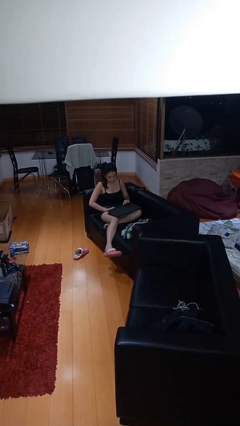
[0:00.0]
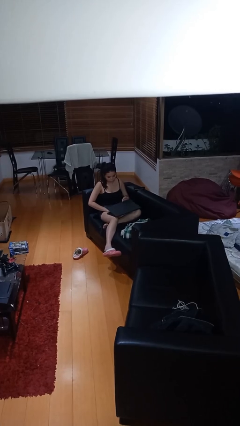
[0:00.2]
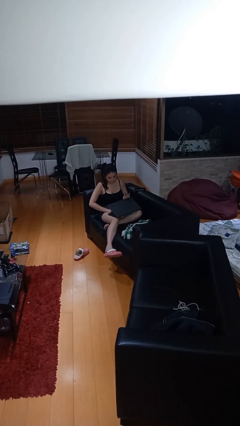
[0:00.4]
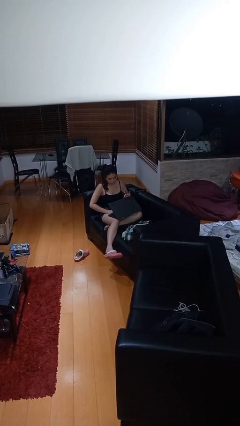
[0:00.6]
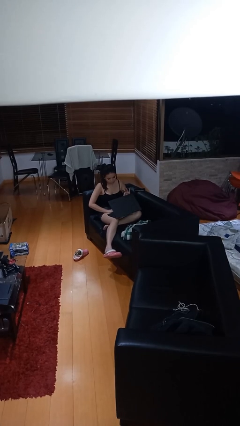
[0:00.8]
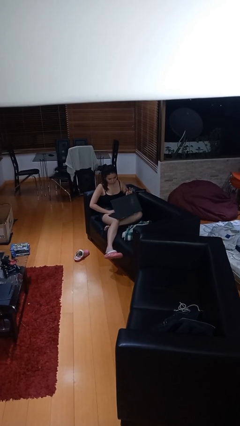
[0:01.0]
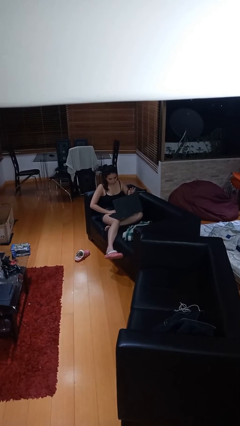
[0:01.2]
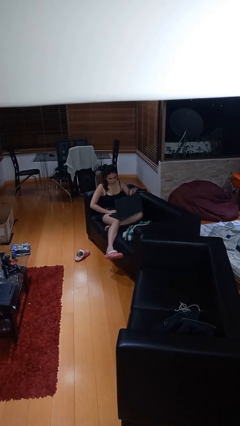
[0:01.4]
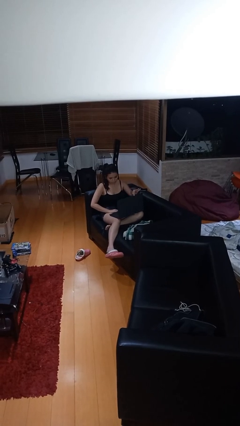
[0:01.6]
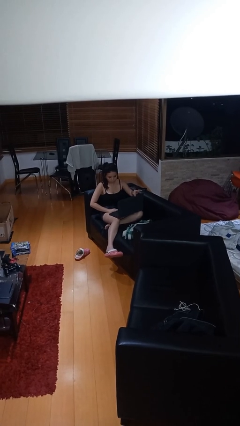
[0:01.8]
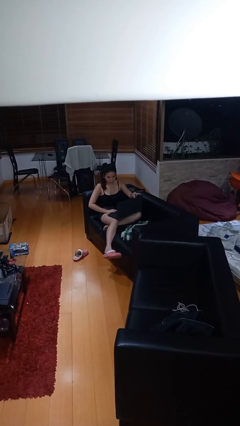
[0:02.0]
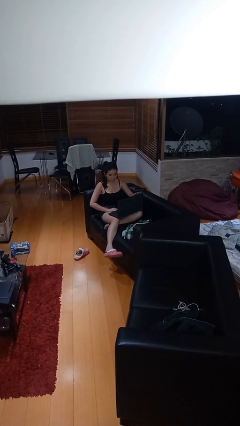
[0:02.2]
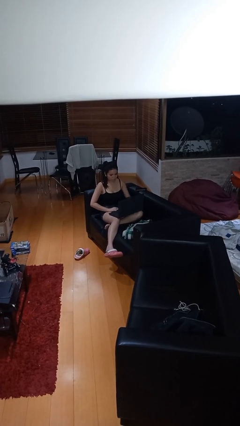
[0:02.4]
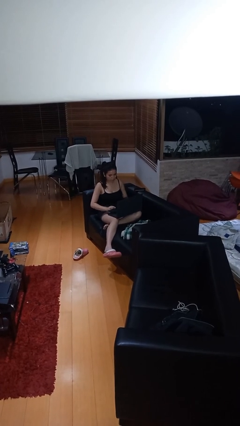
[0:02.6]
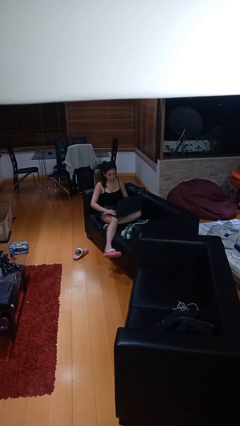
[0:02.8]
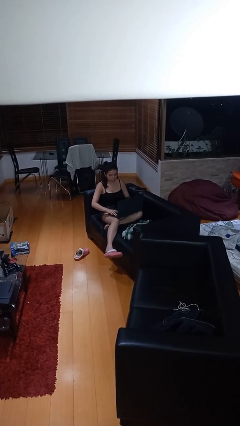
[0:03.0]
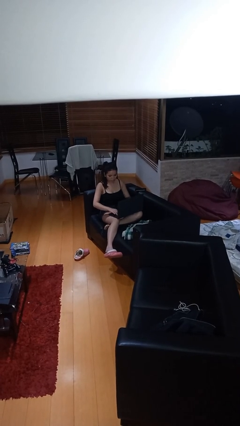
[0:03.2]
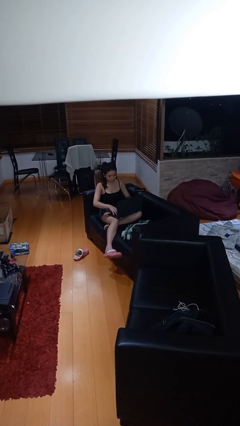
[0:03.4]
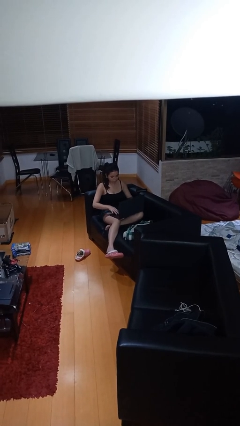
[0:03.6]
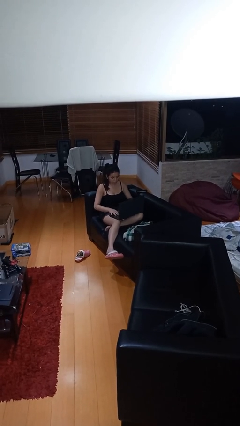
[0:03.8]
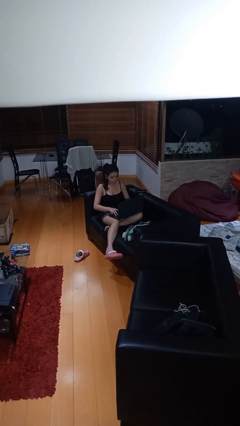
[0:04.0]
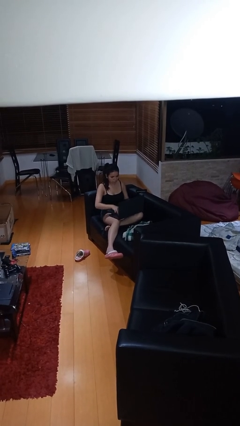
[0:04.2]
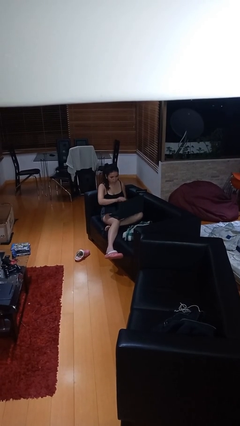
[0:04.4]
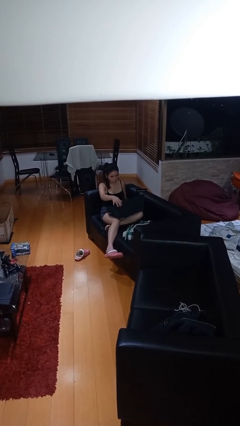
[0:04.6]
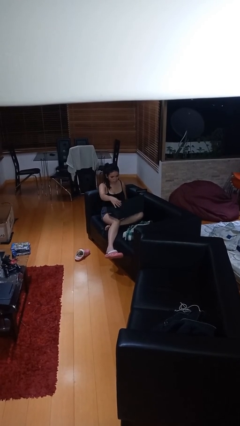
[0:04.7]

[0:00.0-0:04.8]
person interacts with laptop

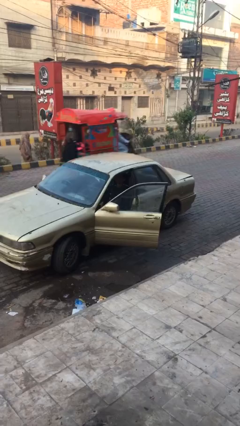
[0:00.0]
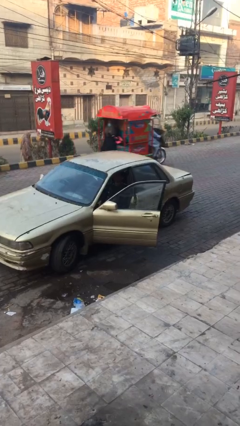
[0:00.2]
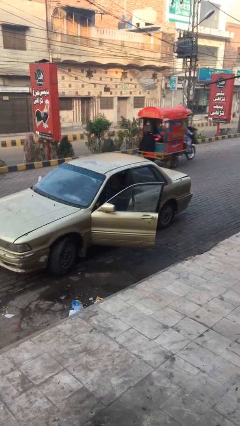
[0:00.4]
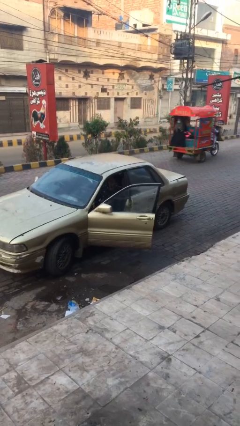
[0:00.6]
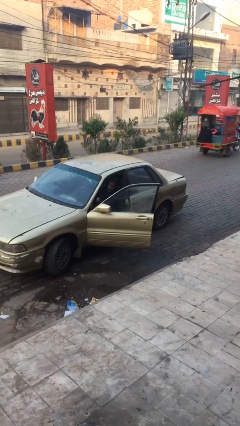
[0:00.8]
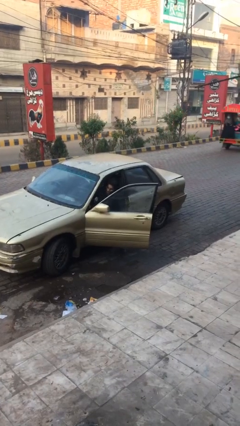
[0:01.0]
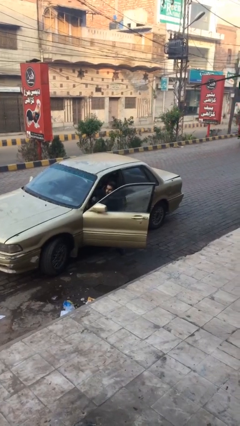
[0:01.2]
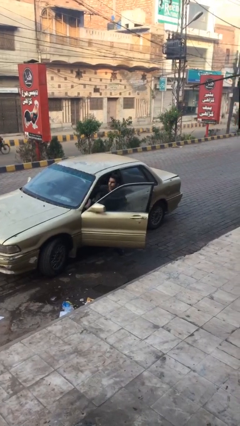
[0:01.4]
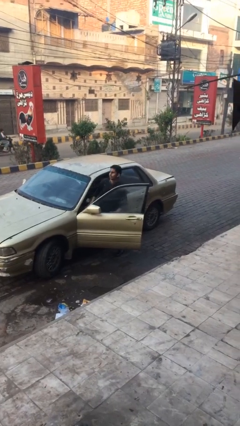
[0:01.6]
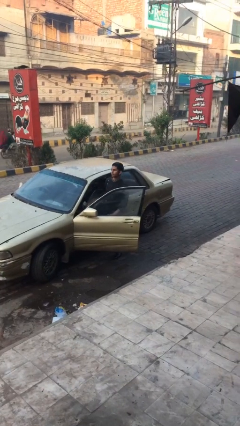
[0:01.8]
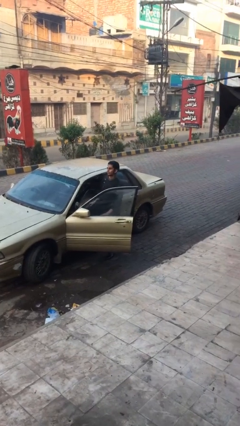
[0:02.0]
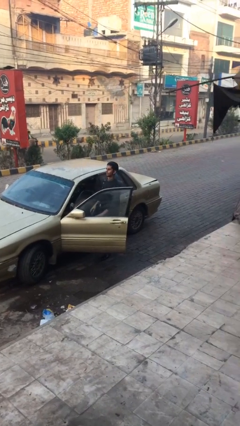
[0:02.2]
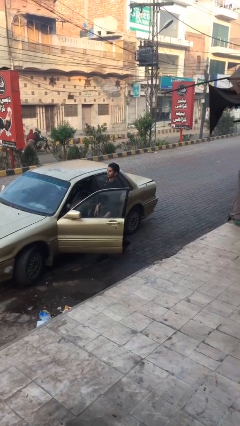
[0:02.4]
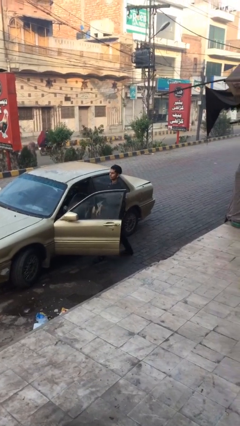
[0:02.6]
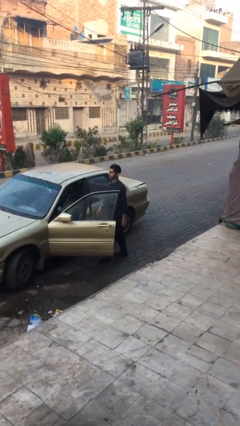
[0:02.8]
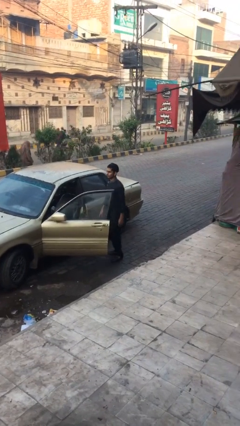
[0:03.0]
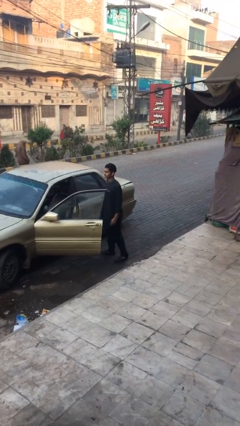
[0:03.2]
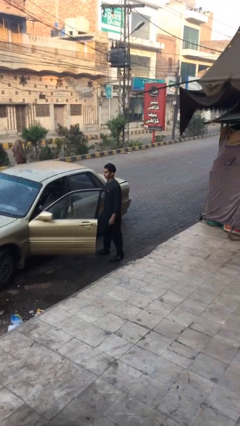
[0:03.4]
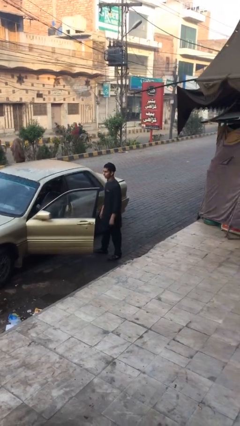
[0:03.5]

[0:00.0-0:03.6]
person exits car

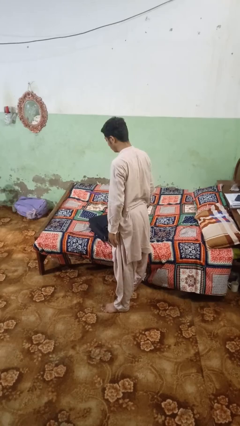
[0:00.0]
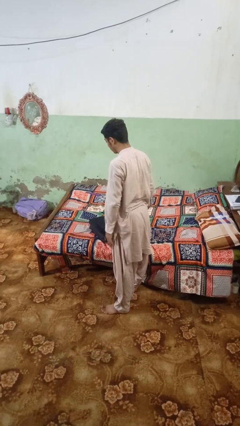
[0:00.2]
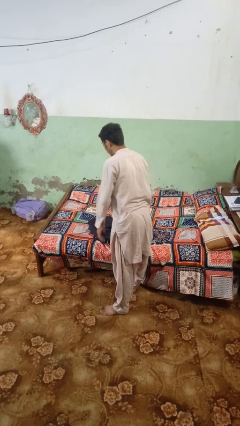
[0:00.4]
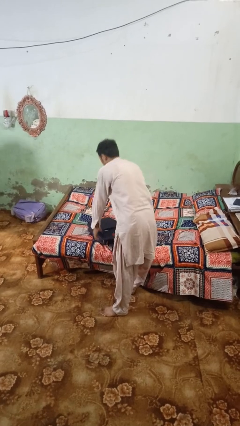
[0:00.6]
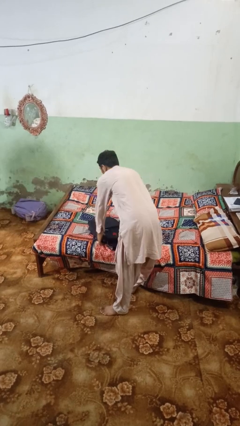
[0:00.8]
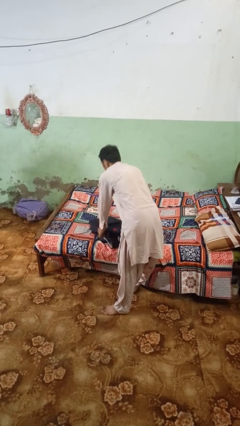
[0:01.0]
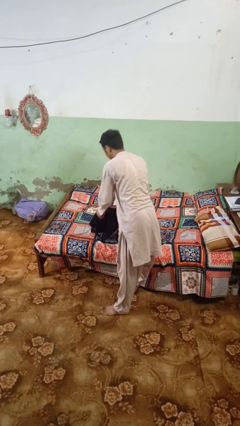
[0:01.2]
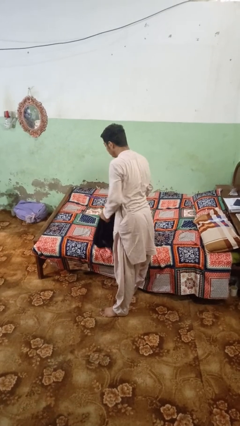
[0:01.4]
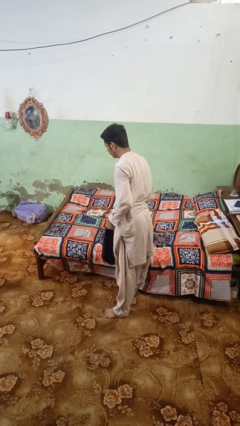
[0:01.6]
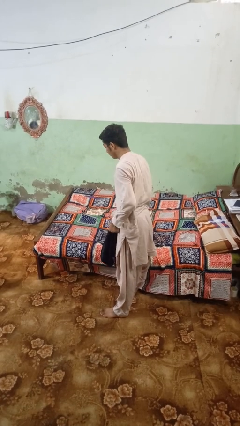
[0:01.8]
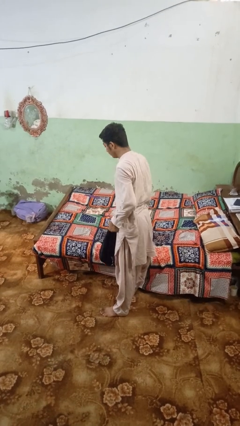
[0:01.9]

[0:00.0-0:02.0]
person picks up object from bed

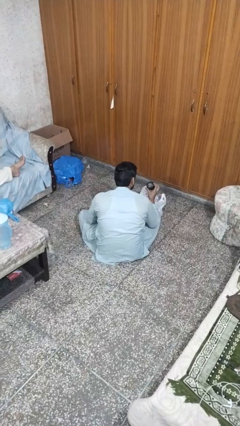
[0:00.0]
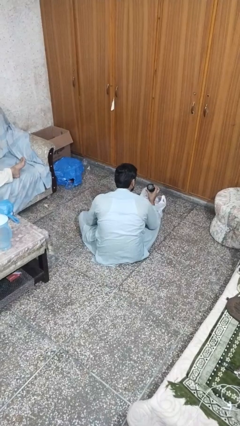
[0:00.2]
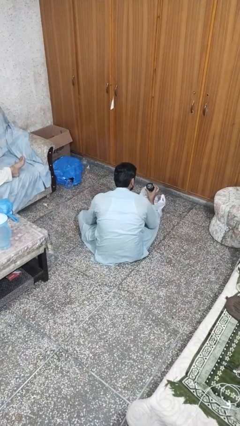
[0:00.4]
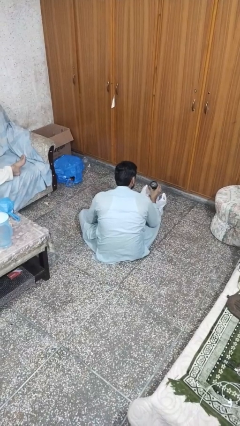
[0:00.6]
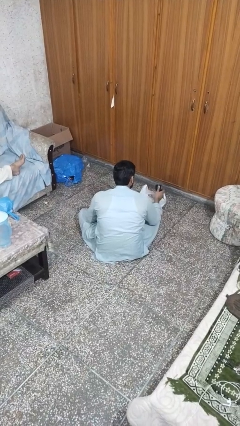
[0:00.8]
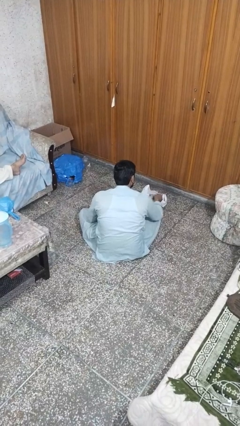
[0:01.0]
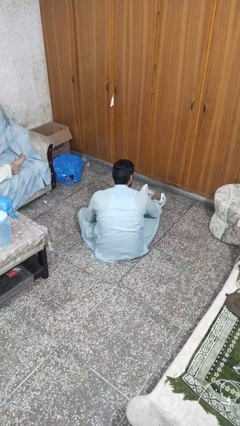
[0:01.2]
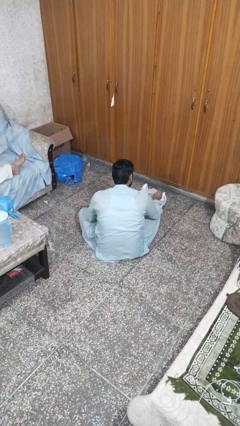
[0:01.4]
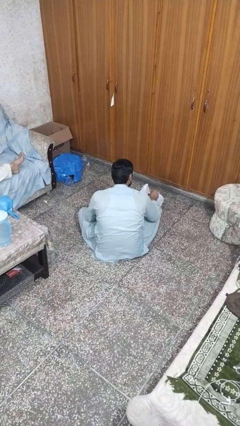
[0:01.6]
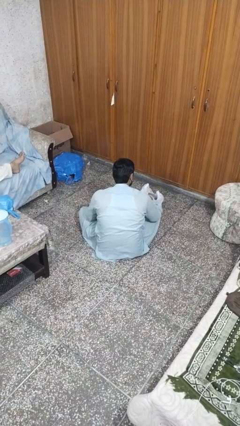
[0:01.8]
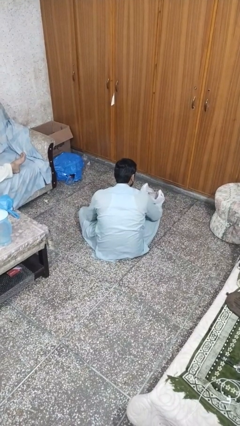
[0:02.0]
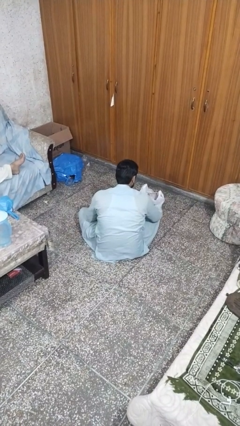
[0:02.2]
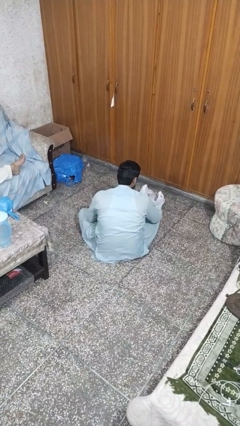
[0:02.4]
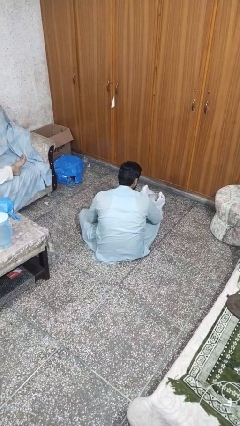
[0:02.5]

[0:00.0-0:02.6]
person puts object into bag

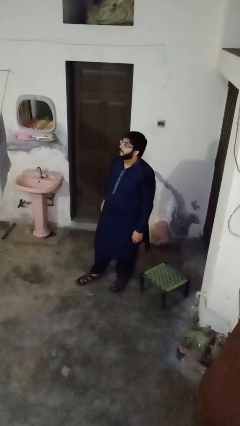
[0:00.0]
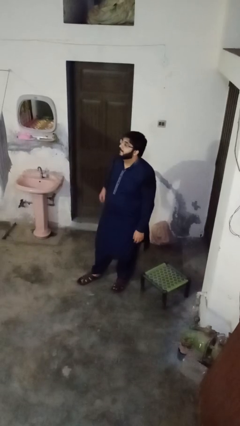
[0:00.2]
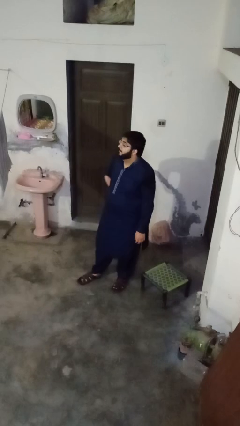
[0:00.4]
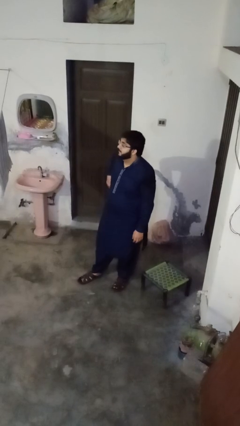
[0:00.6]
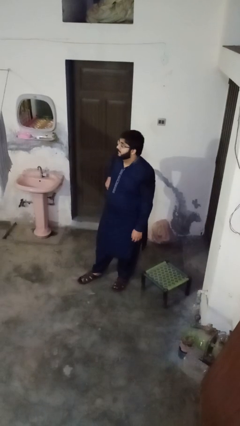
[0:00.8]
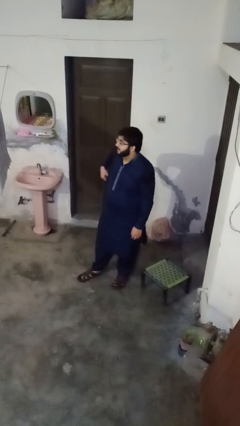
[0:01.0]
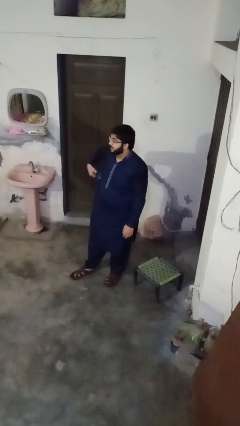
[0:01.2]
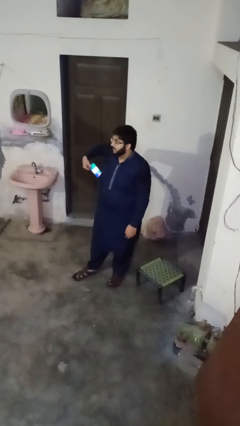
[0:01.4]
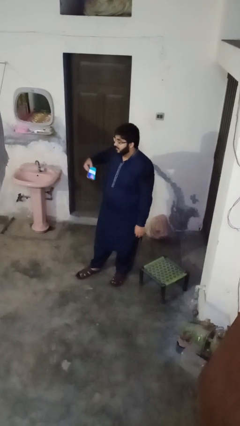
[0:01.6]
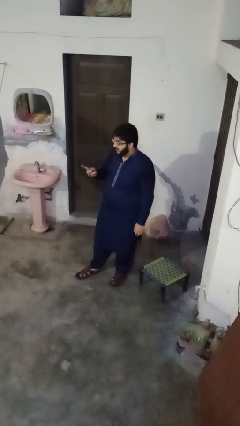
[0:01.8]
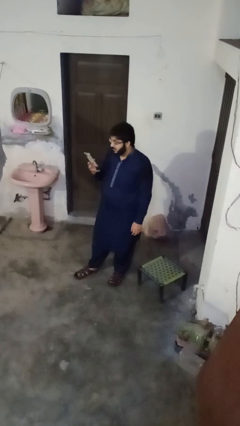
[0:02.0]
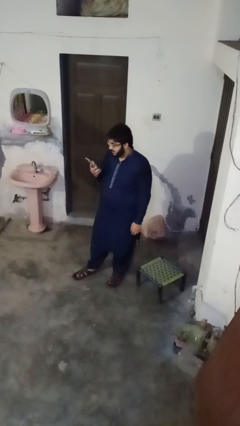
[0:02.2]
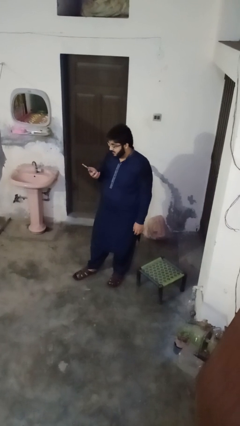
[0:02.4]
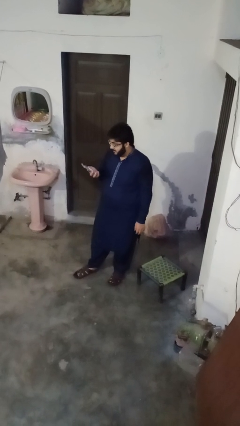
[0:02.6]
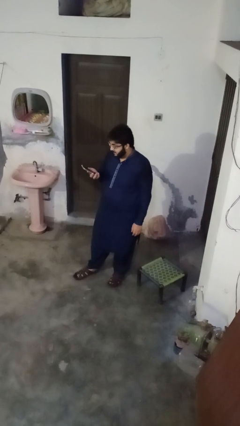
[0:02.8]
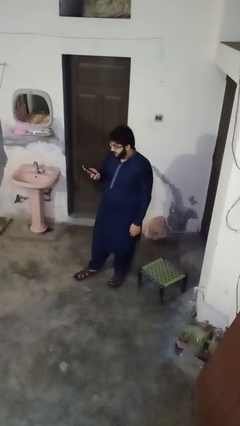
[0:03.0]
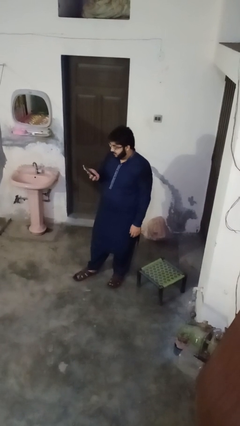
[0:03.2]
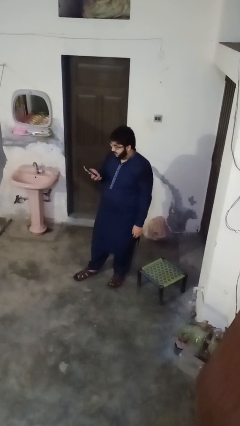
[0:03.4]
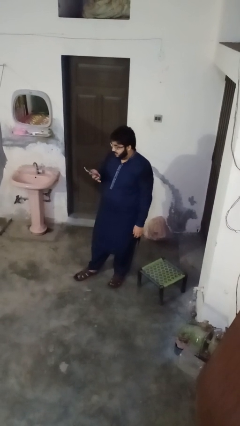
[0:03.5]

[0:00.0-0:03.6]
person takes phone from pocket

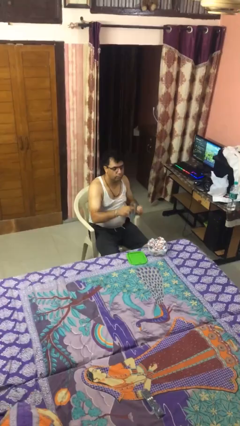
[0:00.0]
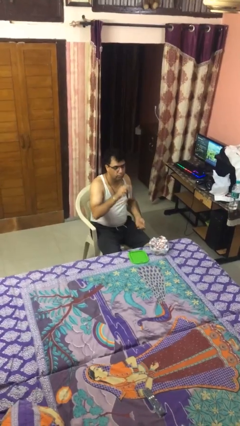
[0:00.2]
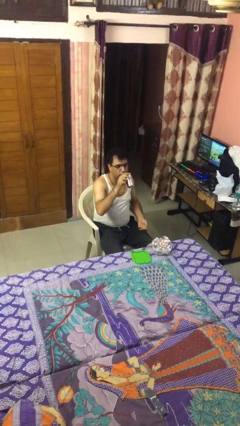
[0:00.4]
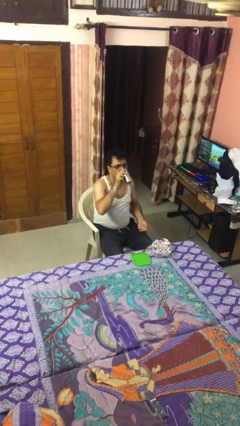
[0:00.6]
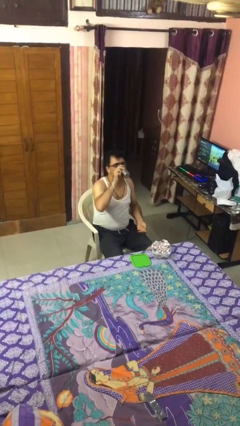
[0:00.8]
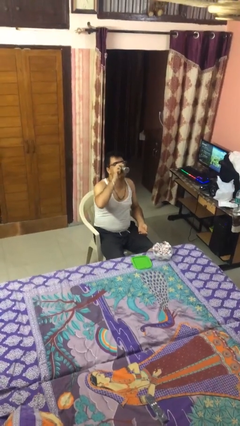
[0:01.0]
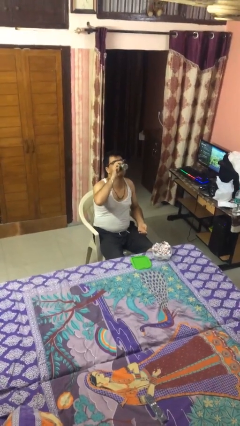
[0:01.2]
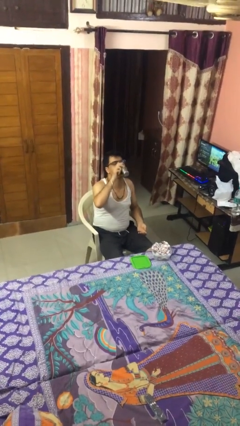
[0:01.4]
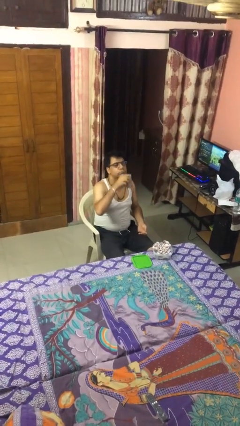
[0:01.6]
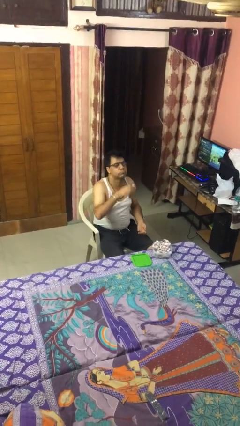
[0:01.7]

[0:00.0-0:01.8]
person drinks from cup
